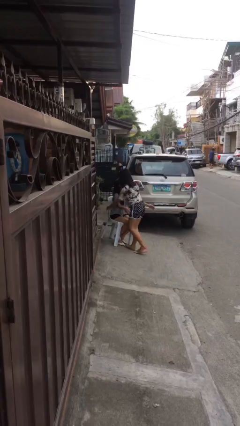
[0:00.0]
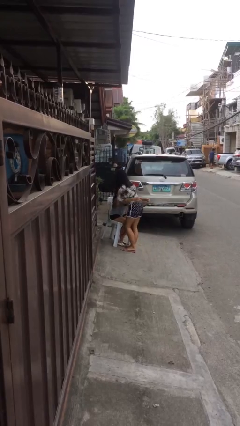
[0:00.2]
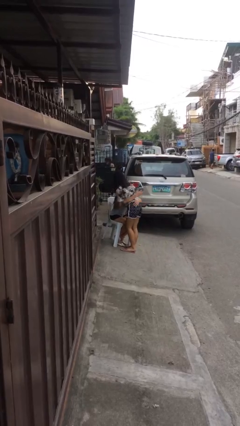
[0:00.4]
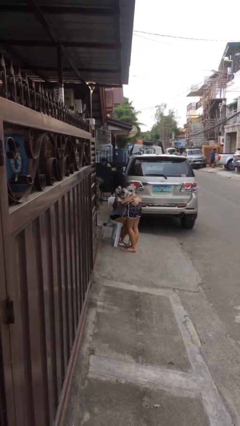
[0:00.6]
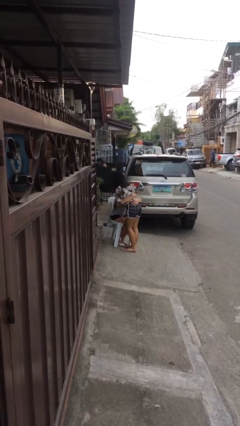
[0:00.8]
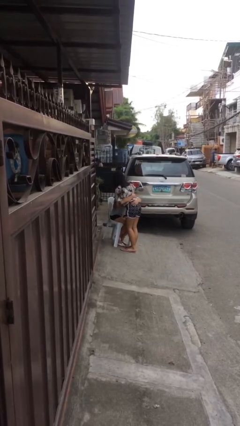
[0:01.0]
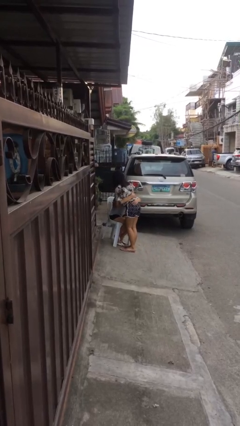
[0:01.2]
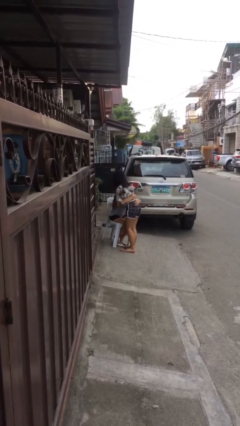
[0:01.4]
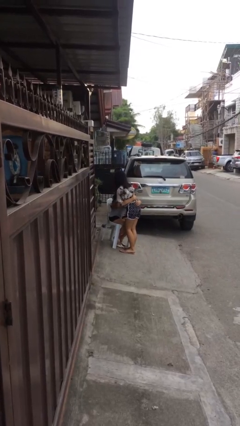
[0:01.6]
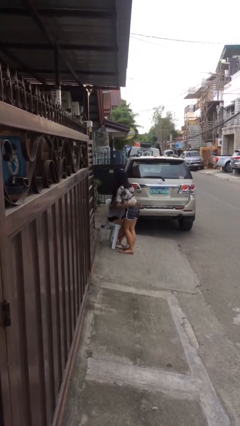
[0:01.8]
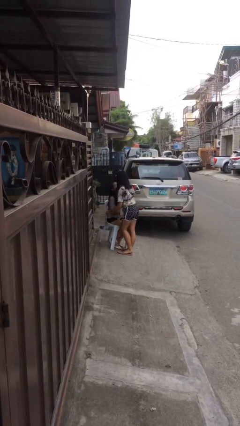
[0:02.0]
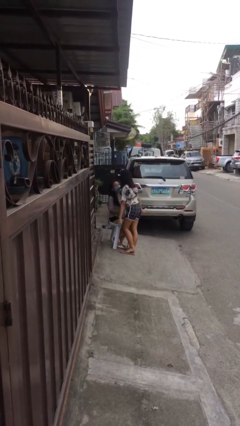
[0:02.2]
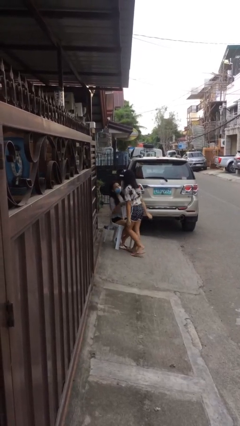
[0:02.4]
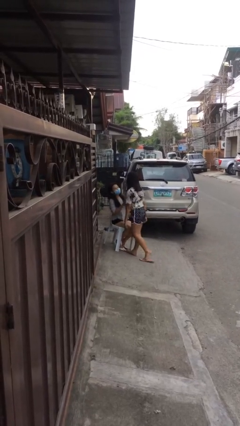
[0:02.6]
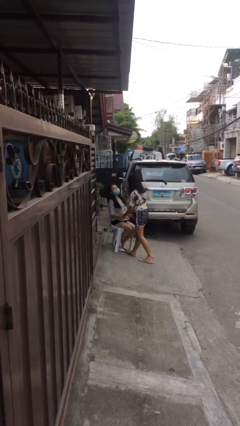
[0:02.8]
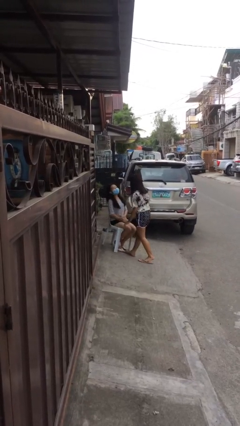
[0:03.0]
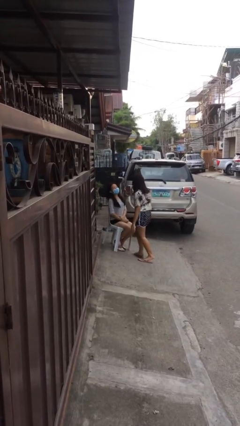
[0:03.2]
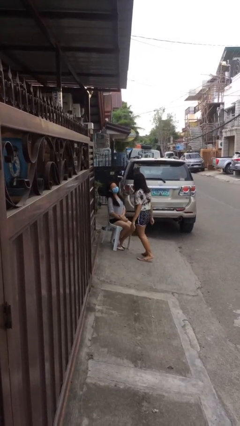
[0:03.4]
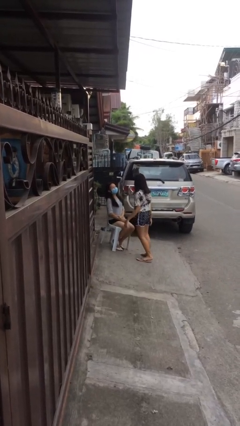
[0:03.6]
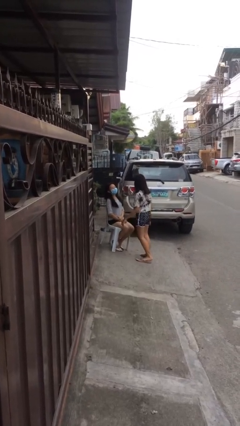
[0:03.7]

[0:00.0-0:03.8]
person embraces person

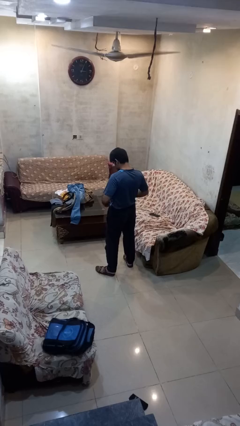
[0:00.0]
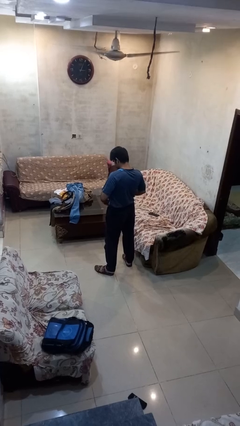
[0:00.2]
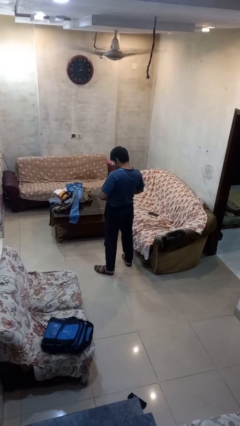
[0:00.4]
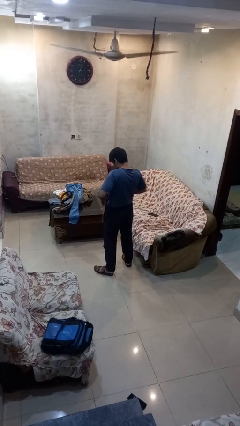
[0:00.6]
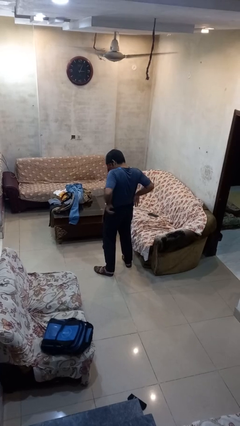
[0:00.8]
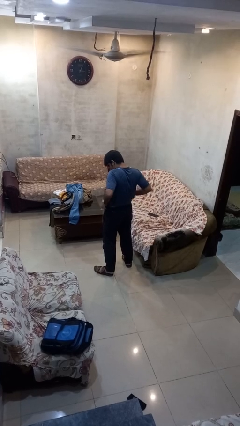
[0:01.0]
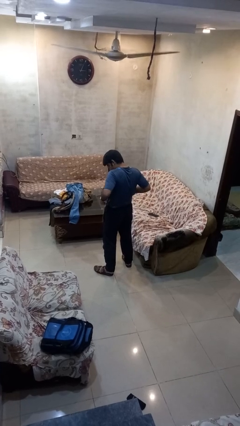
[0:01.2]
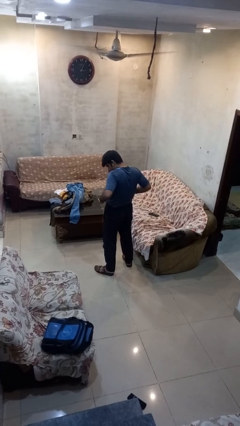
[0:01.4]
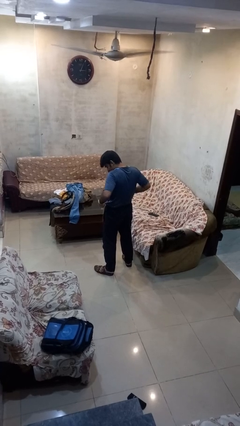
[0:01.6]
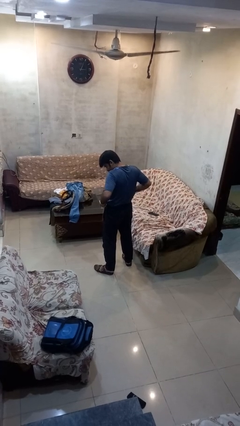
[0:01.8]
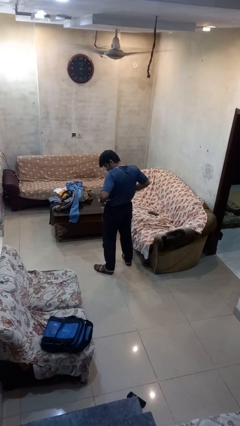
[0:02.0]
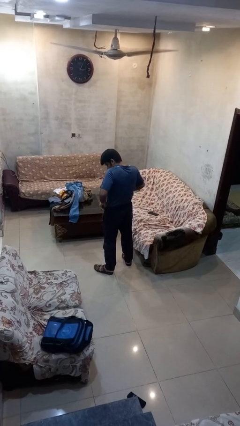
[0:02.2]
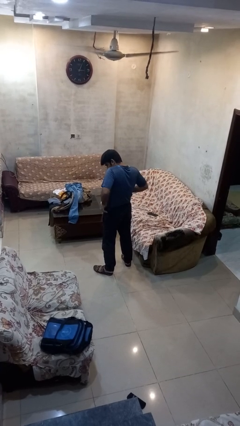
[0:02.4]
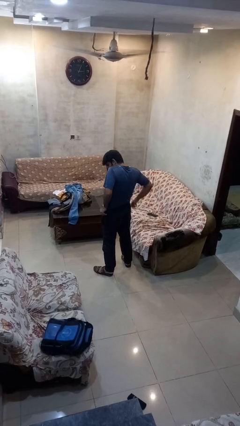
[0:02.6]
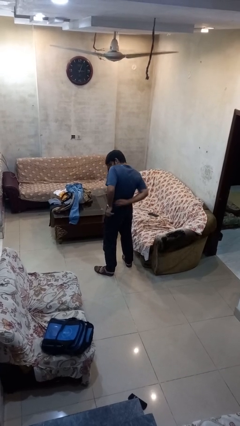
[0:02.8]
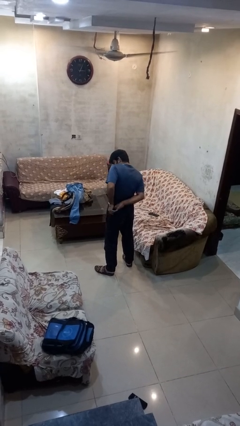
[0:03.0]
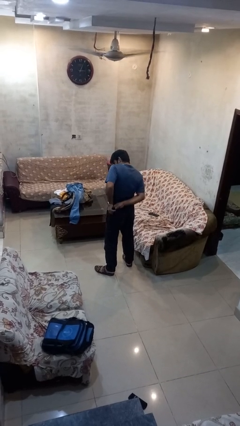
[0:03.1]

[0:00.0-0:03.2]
person hikes up pants

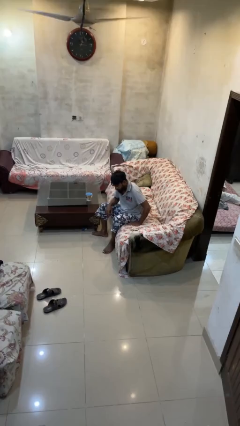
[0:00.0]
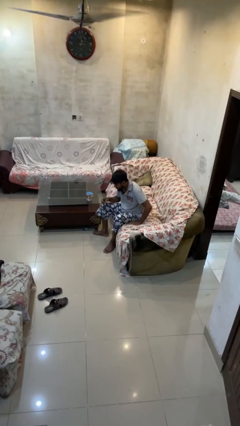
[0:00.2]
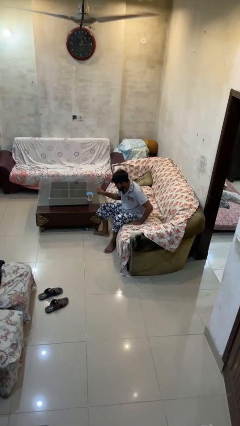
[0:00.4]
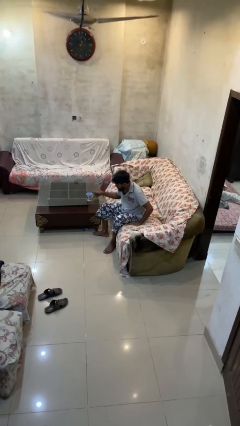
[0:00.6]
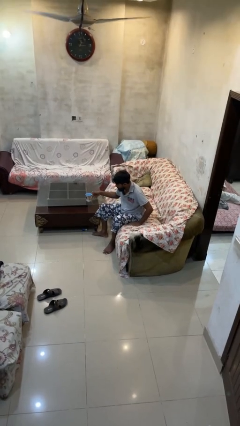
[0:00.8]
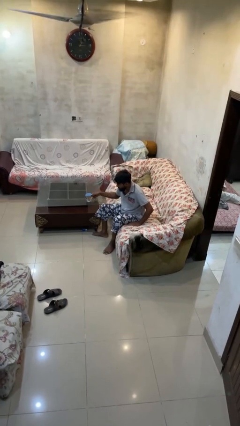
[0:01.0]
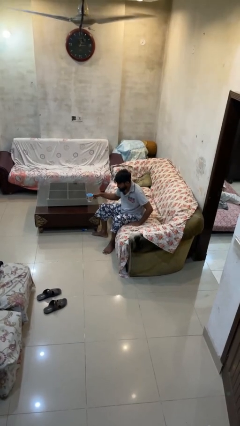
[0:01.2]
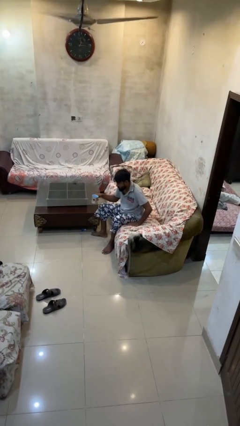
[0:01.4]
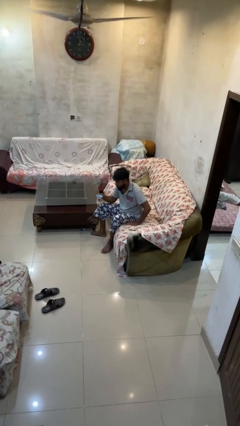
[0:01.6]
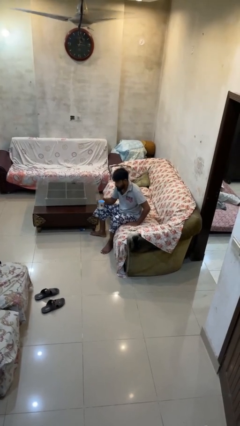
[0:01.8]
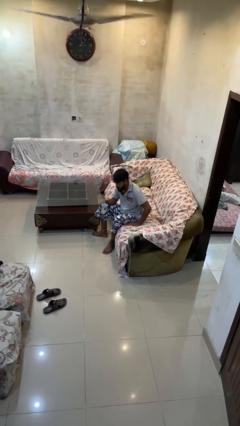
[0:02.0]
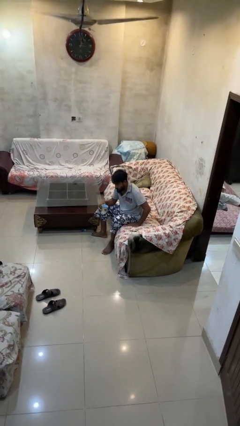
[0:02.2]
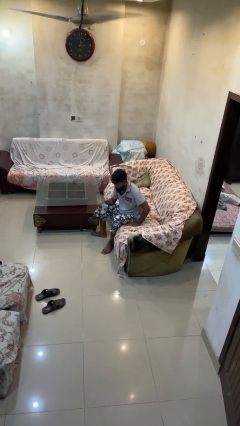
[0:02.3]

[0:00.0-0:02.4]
person picks up object from table

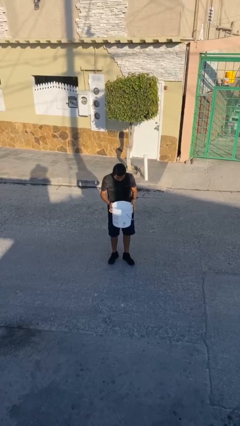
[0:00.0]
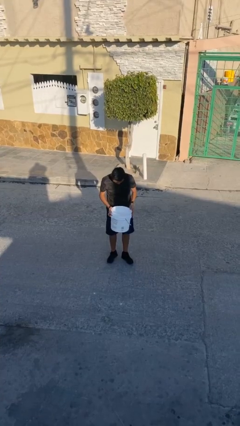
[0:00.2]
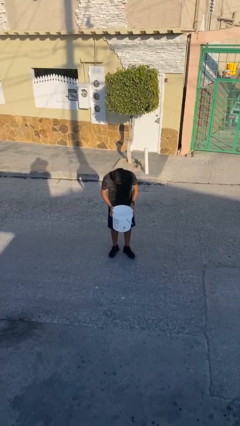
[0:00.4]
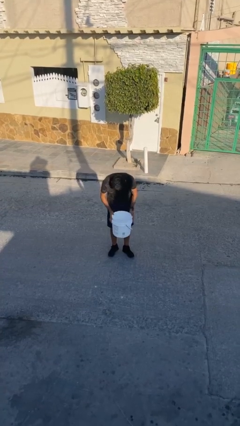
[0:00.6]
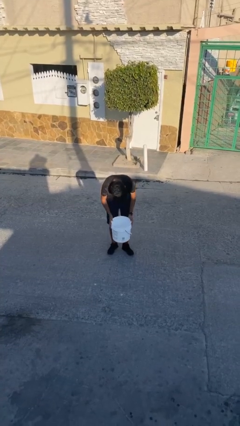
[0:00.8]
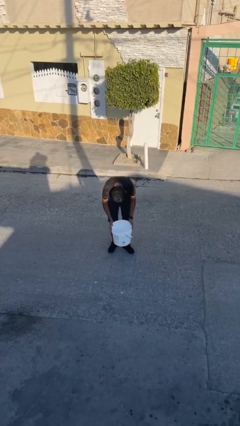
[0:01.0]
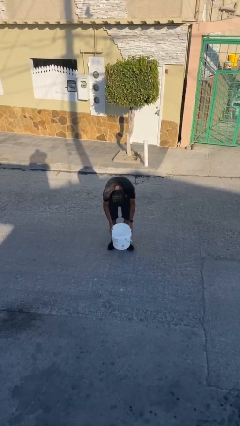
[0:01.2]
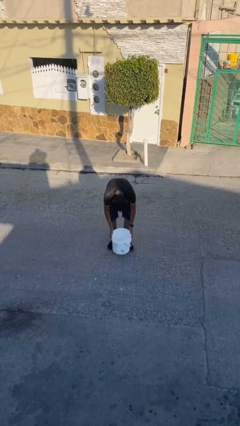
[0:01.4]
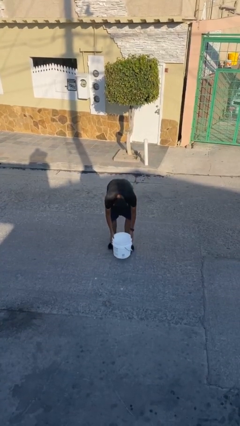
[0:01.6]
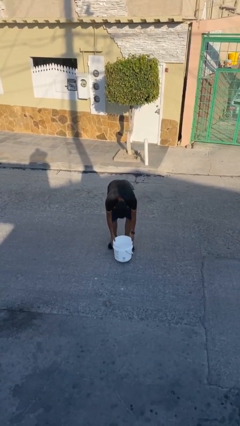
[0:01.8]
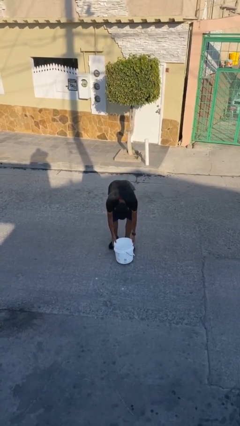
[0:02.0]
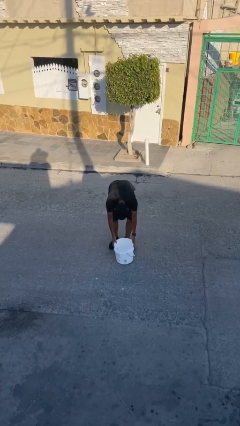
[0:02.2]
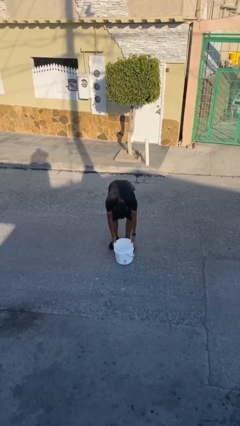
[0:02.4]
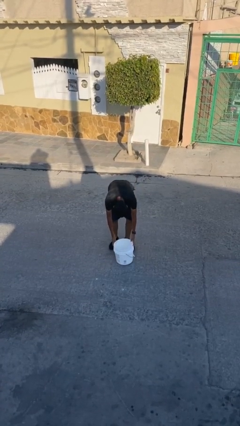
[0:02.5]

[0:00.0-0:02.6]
person puts down object on floor

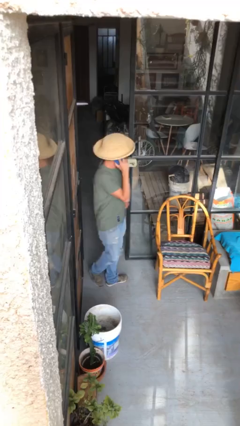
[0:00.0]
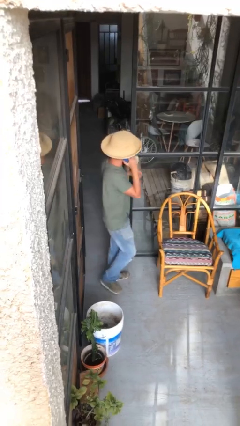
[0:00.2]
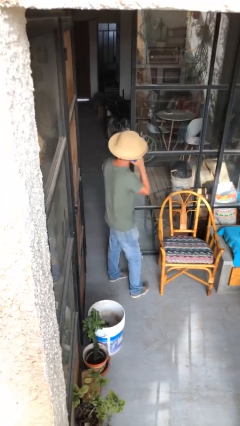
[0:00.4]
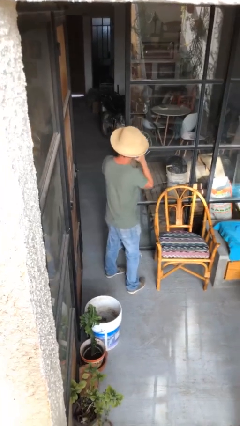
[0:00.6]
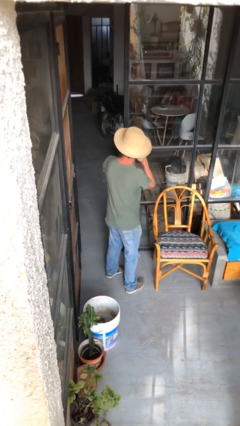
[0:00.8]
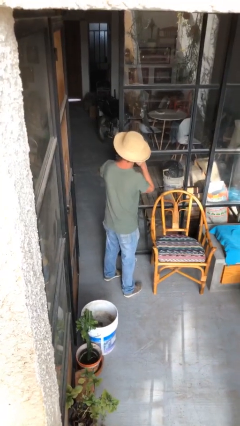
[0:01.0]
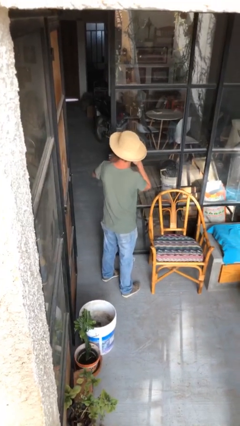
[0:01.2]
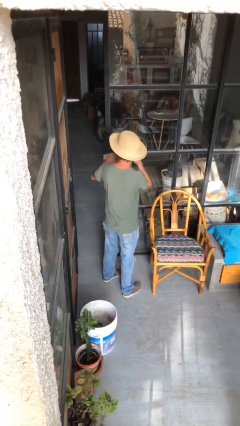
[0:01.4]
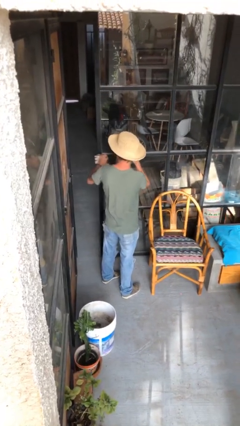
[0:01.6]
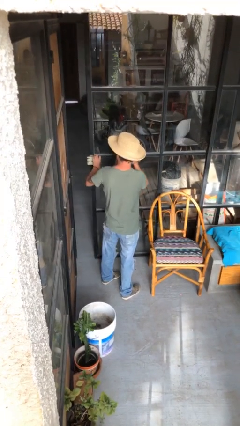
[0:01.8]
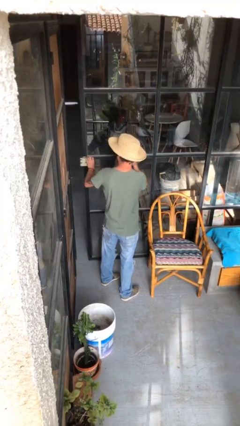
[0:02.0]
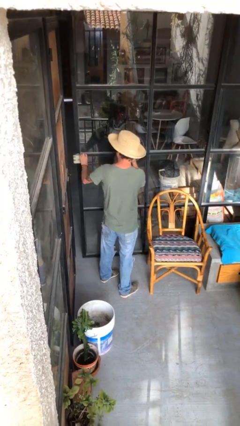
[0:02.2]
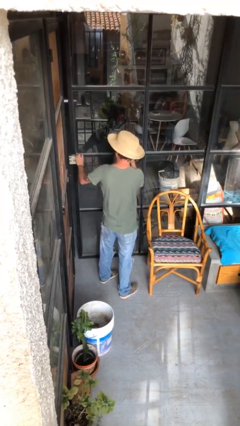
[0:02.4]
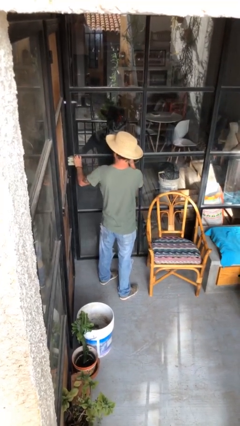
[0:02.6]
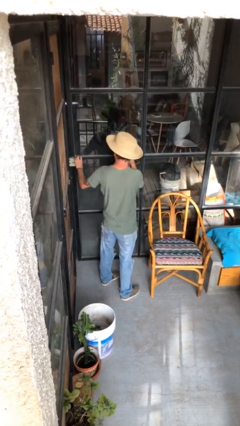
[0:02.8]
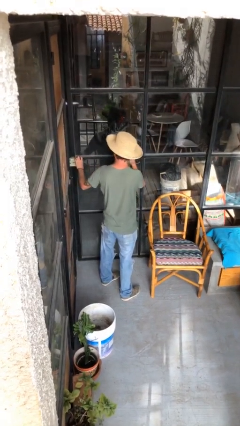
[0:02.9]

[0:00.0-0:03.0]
person closes facility door

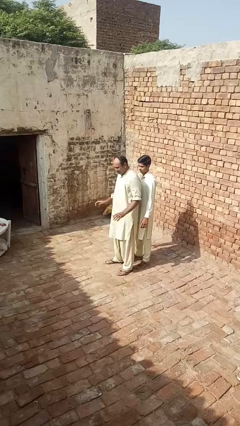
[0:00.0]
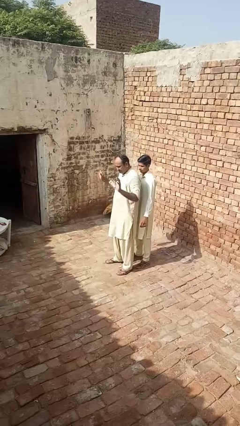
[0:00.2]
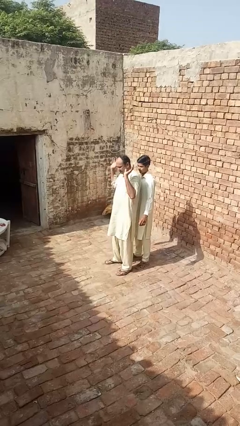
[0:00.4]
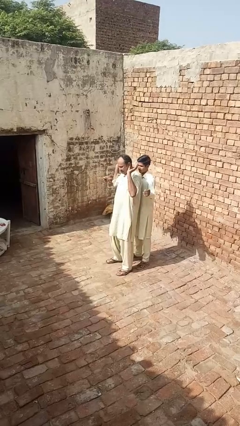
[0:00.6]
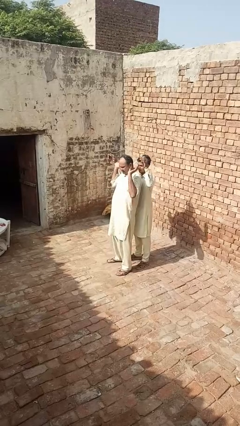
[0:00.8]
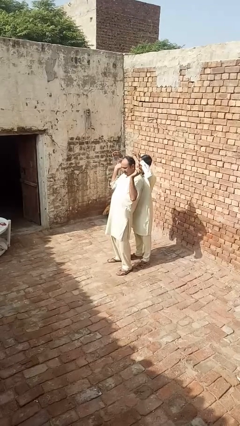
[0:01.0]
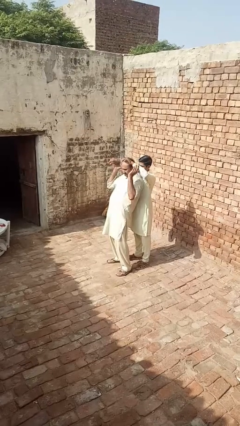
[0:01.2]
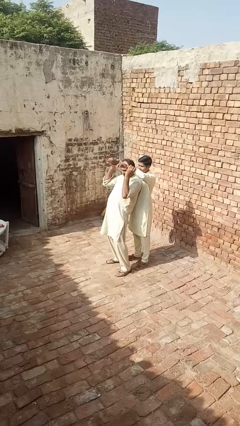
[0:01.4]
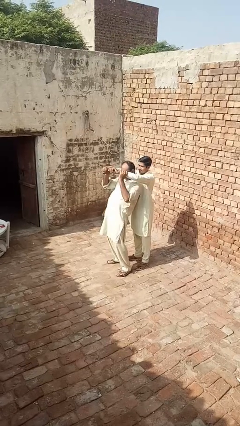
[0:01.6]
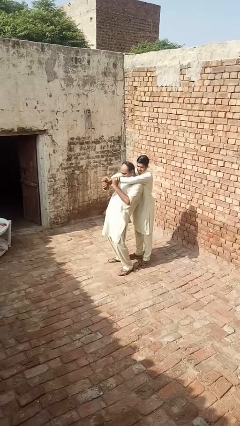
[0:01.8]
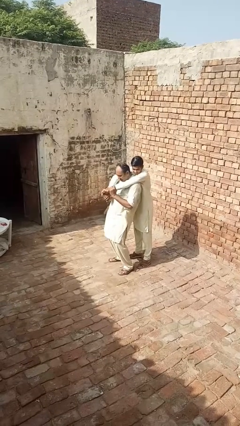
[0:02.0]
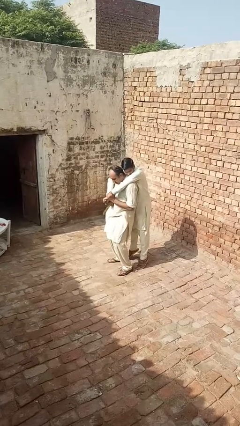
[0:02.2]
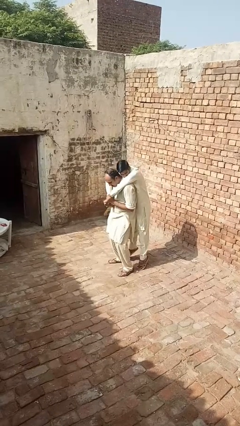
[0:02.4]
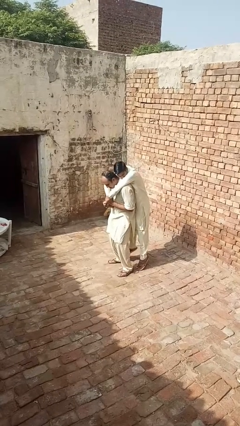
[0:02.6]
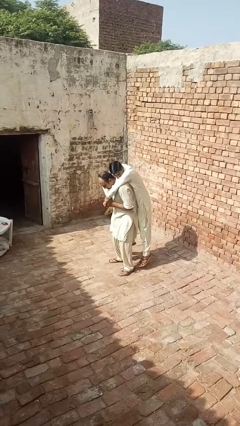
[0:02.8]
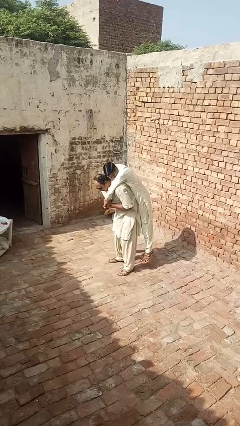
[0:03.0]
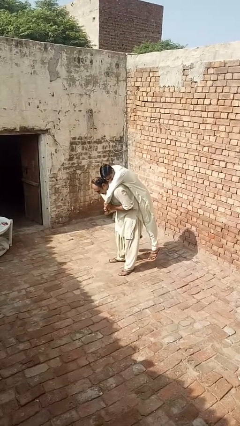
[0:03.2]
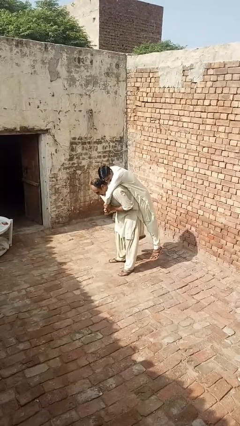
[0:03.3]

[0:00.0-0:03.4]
person carries person over shoulder
